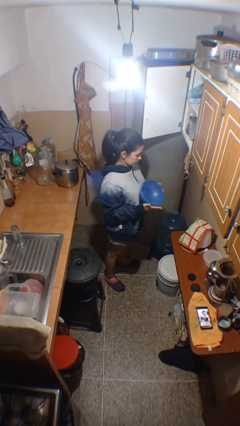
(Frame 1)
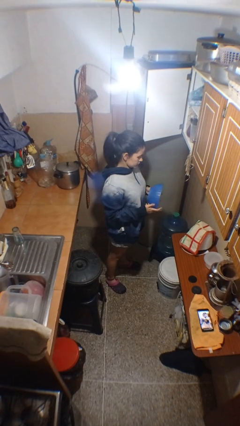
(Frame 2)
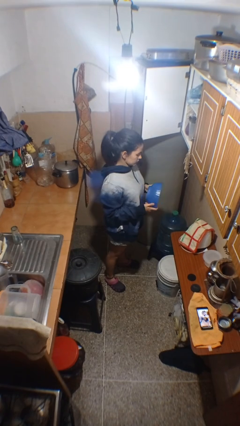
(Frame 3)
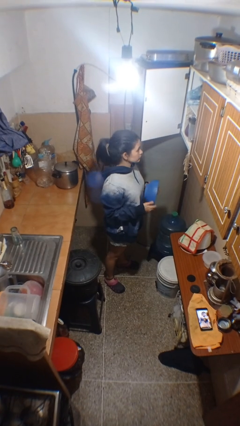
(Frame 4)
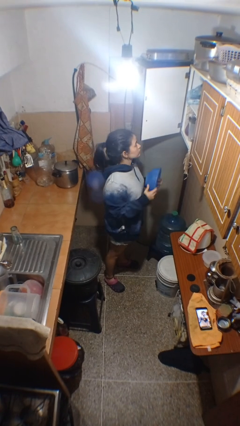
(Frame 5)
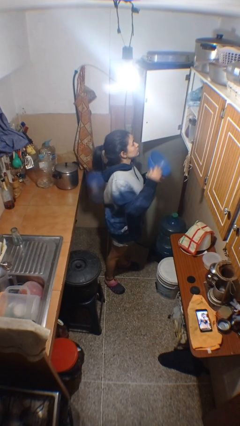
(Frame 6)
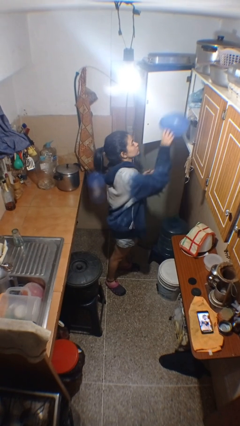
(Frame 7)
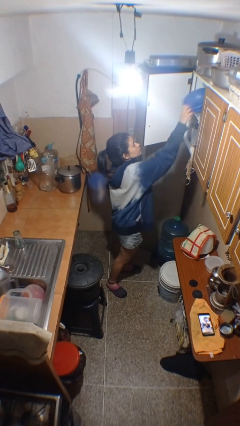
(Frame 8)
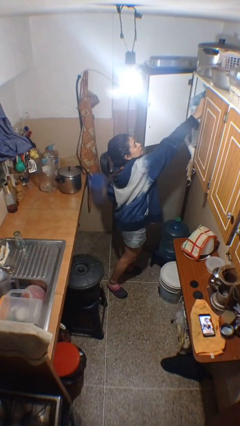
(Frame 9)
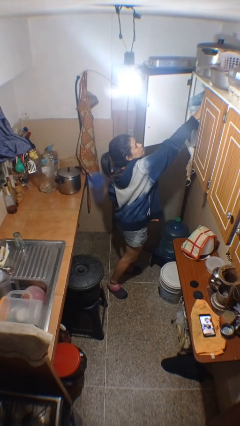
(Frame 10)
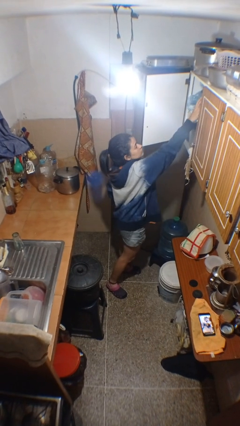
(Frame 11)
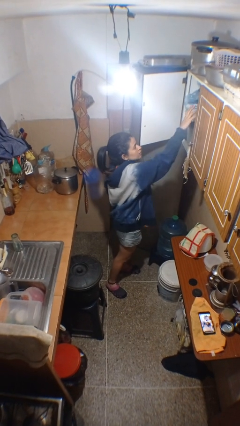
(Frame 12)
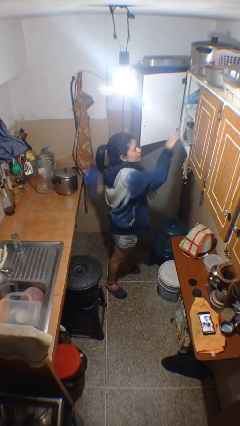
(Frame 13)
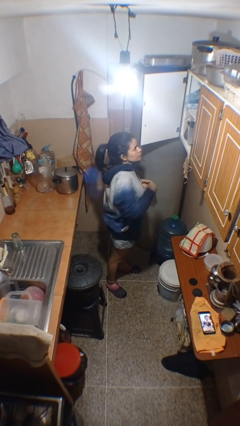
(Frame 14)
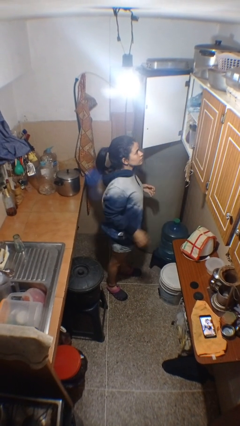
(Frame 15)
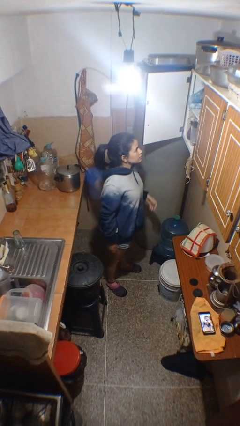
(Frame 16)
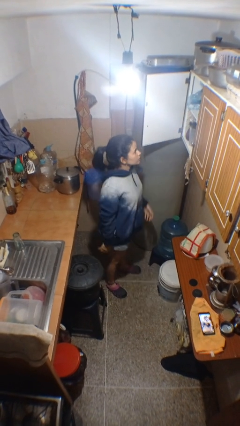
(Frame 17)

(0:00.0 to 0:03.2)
person puts down object into cabinet

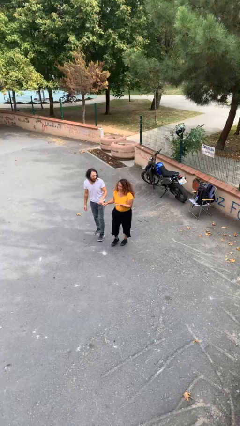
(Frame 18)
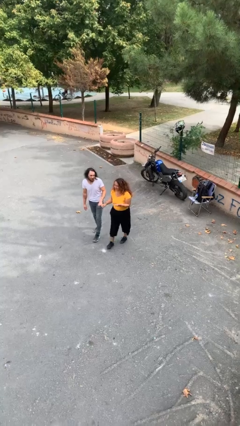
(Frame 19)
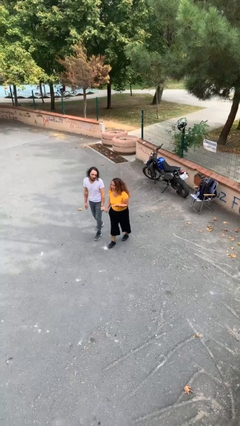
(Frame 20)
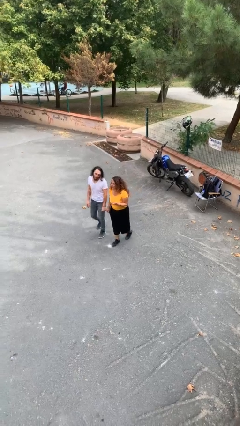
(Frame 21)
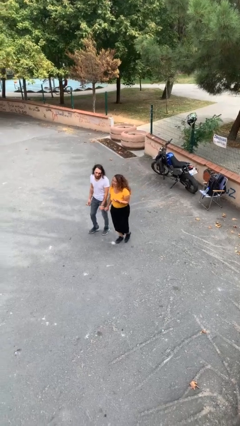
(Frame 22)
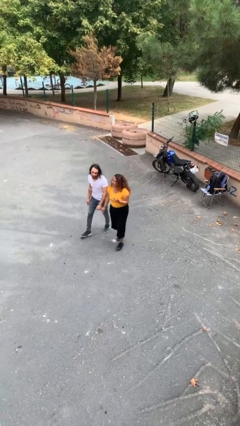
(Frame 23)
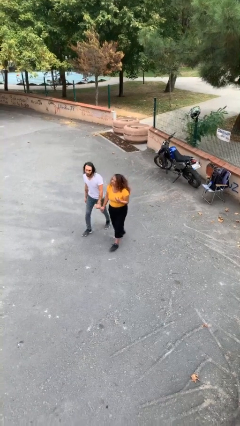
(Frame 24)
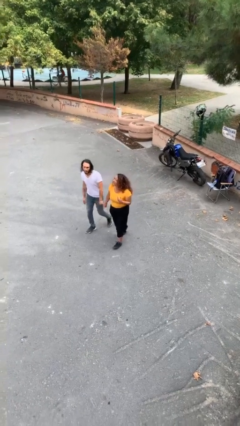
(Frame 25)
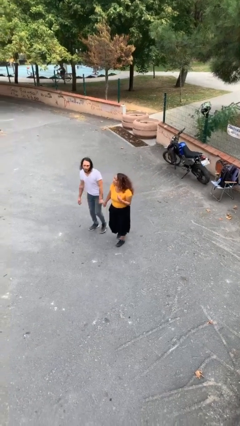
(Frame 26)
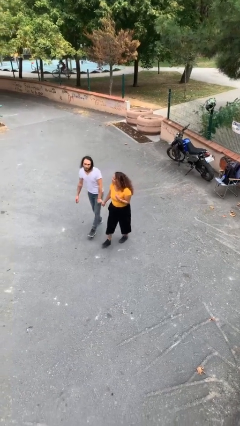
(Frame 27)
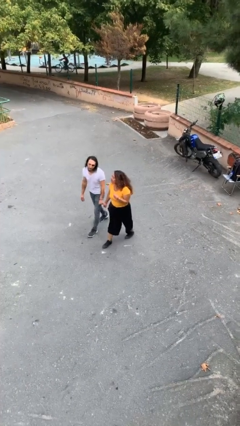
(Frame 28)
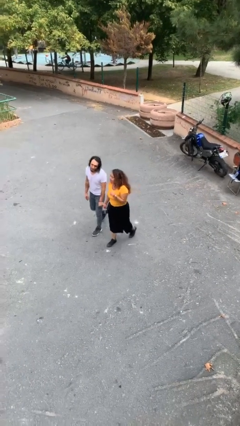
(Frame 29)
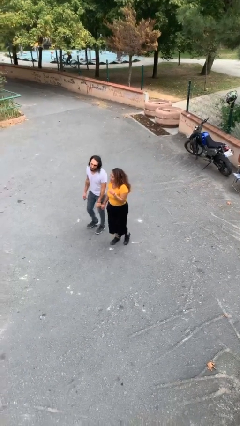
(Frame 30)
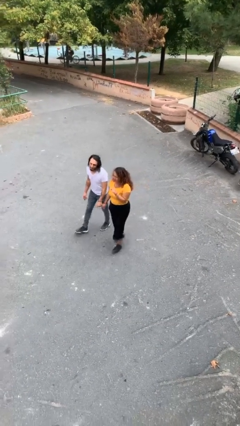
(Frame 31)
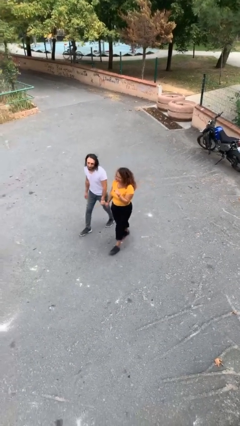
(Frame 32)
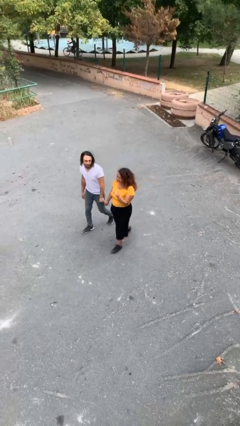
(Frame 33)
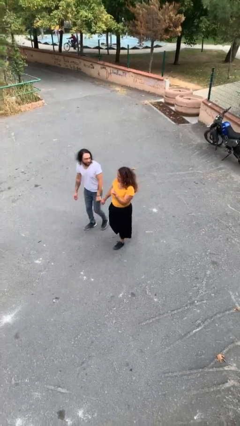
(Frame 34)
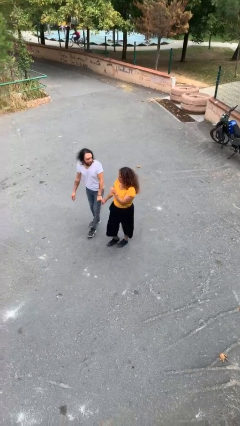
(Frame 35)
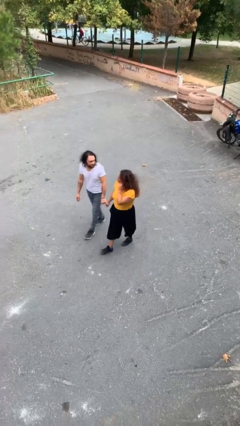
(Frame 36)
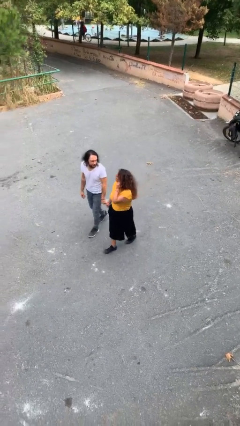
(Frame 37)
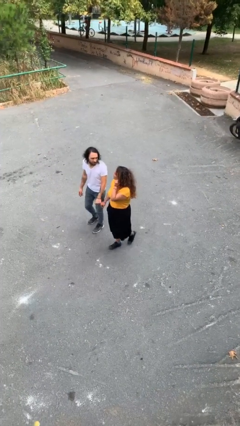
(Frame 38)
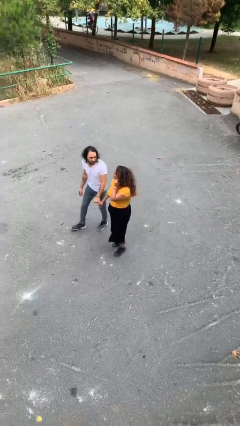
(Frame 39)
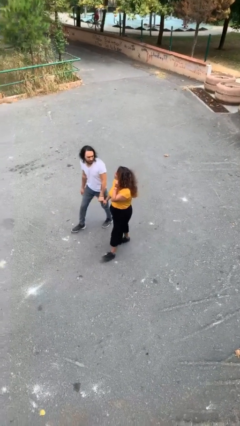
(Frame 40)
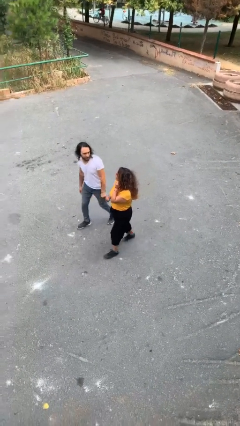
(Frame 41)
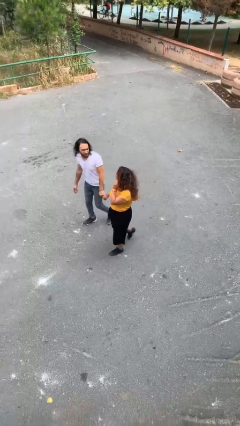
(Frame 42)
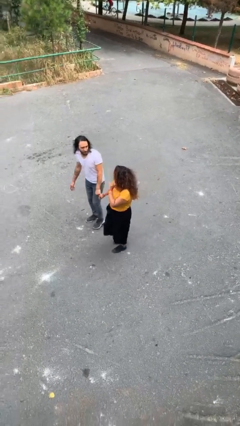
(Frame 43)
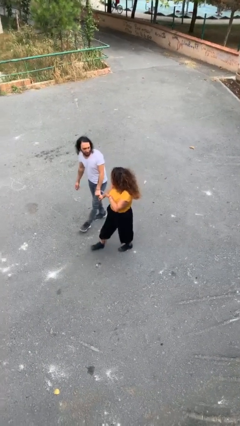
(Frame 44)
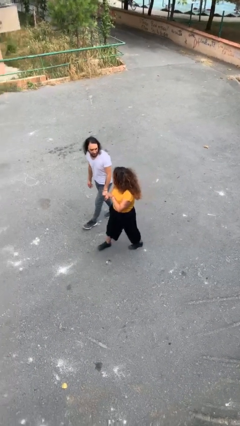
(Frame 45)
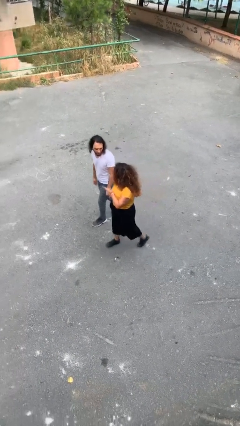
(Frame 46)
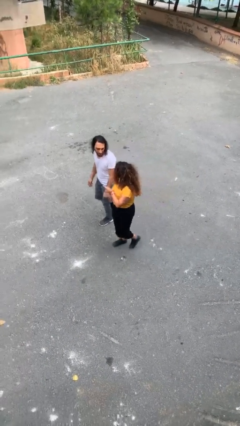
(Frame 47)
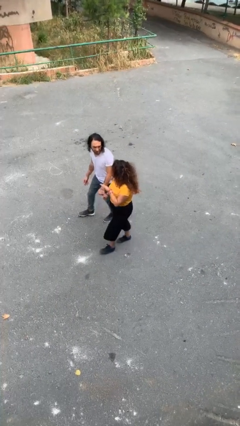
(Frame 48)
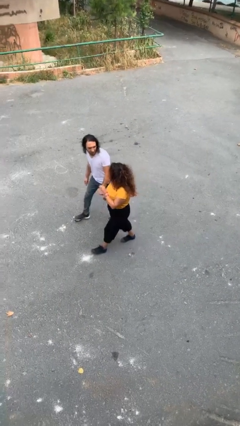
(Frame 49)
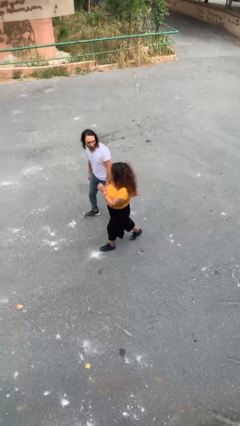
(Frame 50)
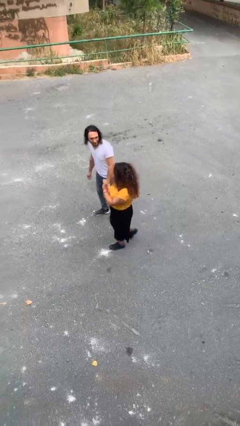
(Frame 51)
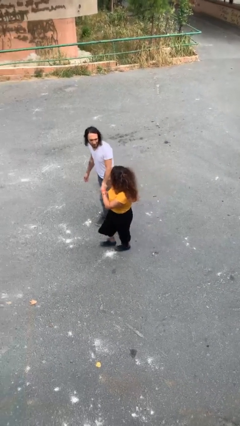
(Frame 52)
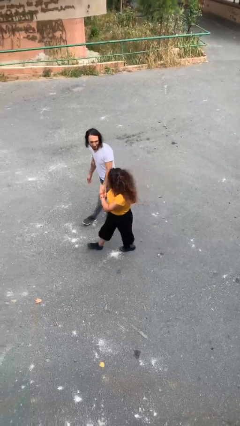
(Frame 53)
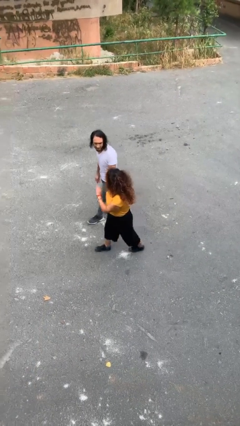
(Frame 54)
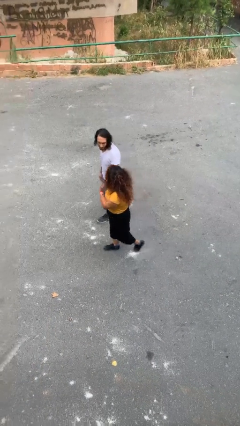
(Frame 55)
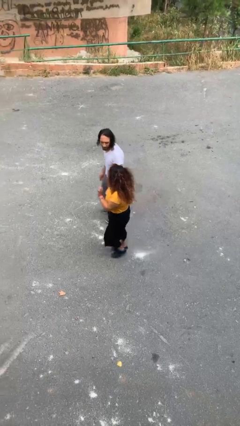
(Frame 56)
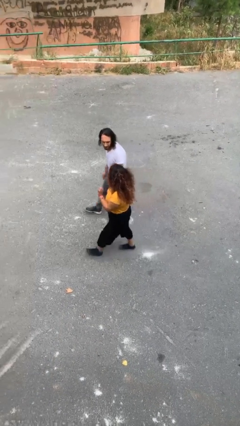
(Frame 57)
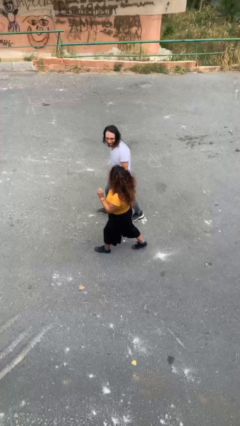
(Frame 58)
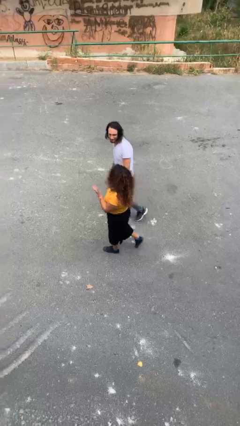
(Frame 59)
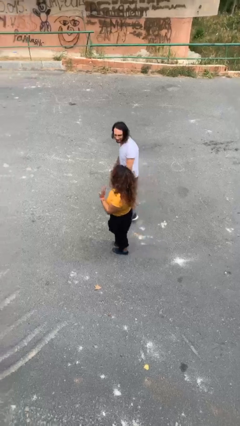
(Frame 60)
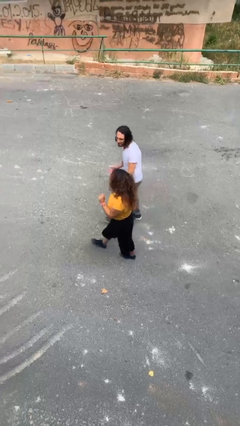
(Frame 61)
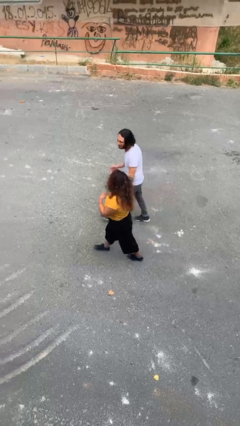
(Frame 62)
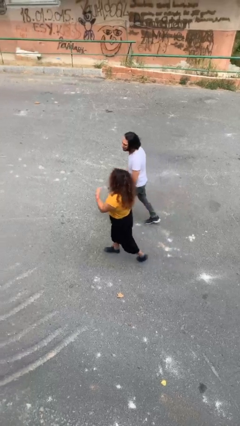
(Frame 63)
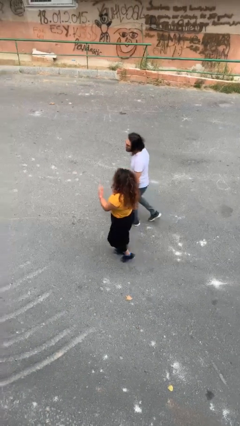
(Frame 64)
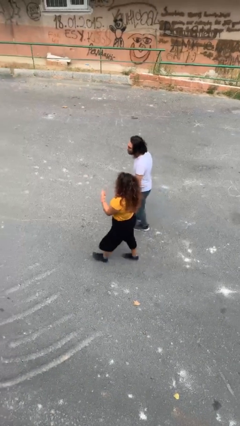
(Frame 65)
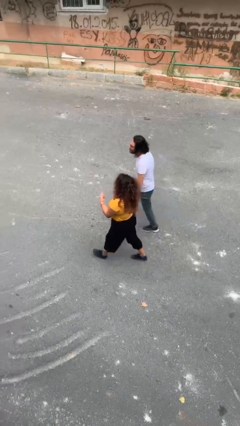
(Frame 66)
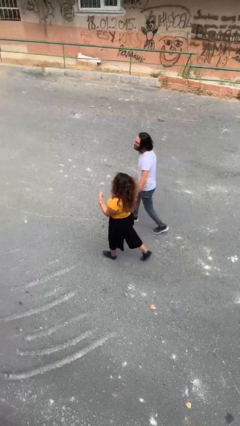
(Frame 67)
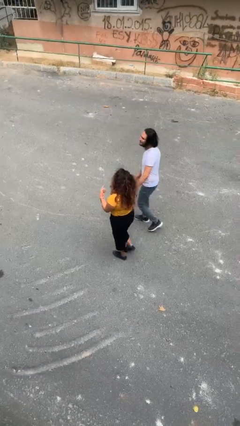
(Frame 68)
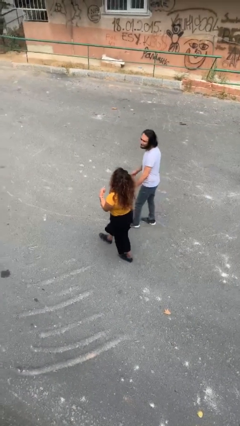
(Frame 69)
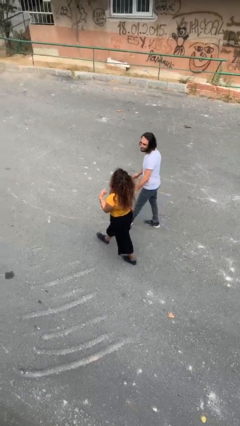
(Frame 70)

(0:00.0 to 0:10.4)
person holds hand

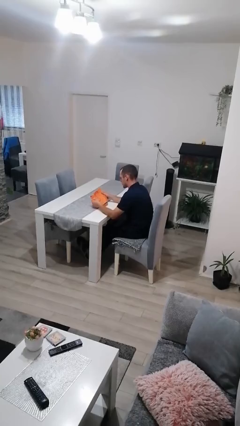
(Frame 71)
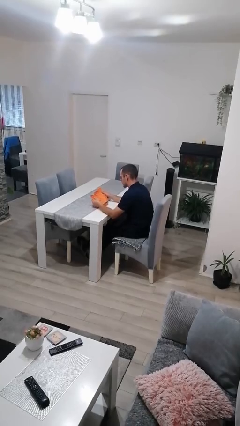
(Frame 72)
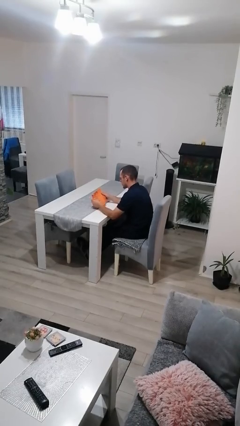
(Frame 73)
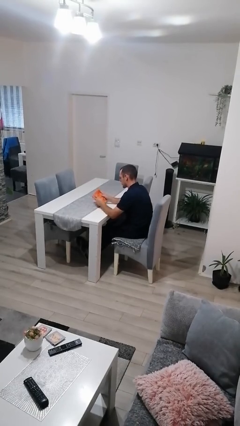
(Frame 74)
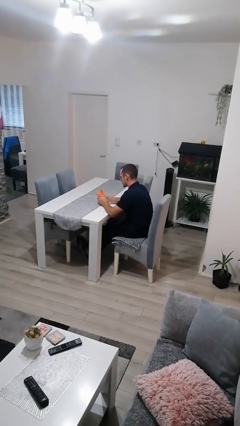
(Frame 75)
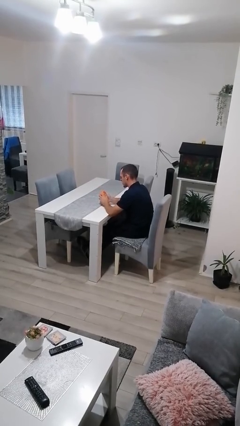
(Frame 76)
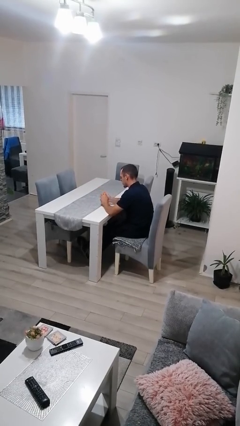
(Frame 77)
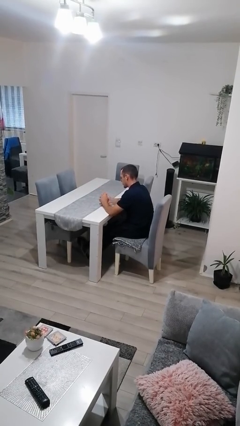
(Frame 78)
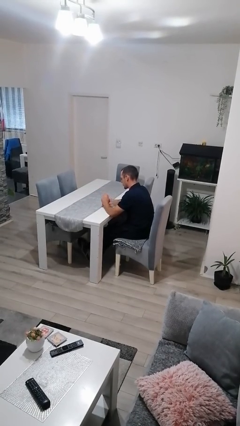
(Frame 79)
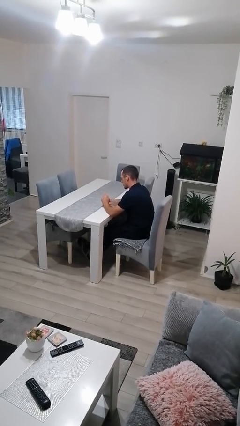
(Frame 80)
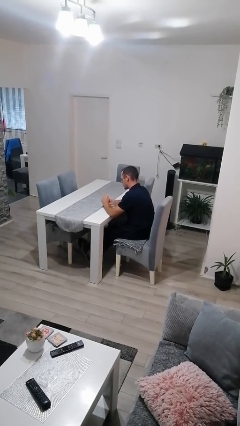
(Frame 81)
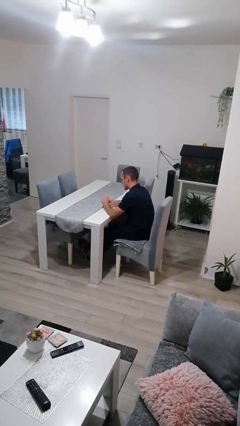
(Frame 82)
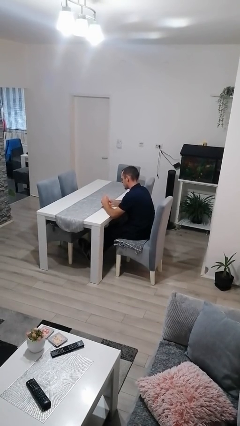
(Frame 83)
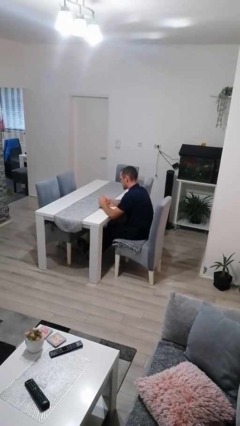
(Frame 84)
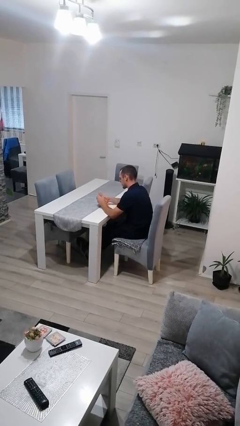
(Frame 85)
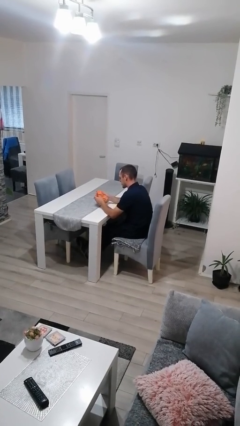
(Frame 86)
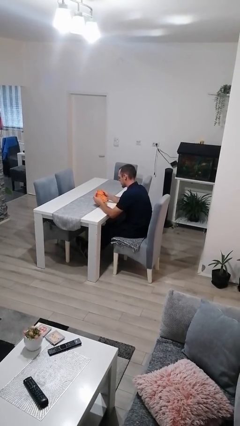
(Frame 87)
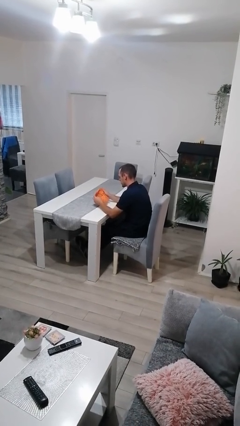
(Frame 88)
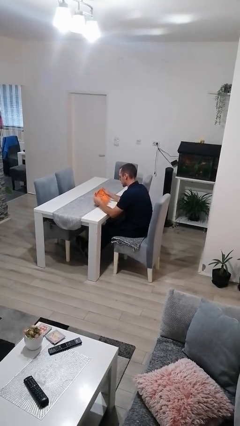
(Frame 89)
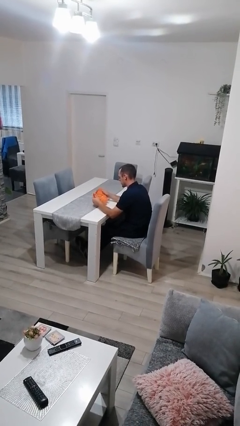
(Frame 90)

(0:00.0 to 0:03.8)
person crumples paper

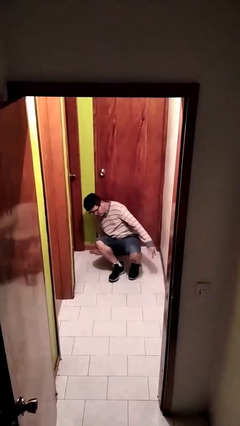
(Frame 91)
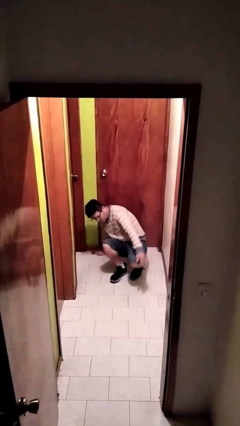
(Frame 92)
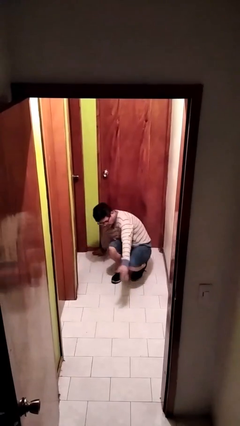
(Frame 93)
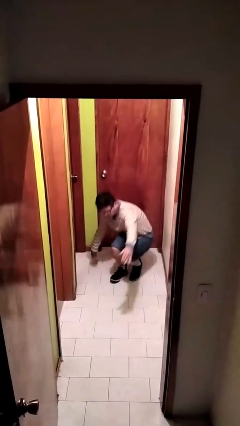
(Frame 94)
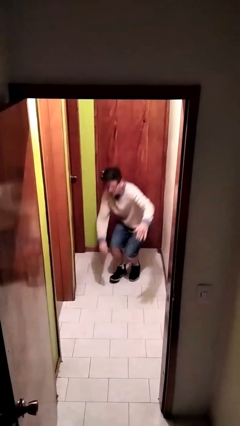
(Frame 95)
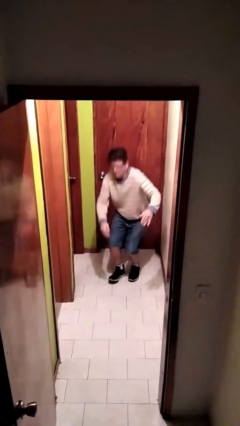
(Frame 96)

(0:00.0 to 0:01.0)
person stands up
